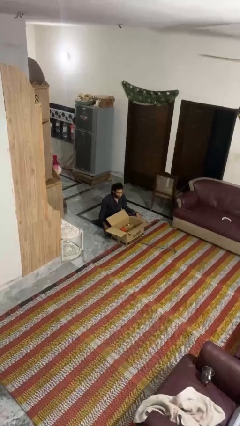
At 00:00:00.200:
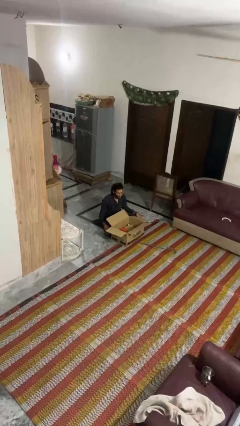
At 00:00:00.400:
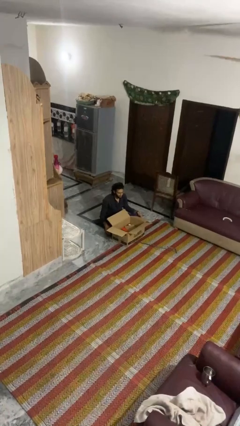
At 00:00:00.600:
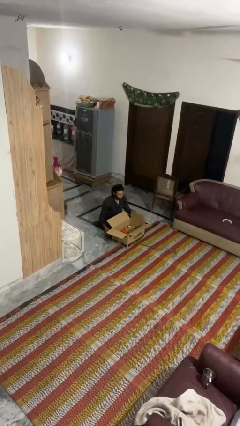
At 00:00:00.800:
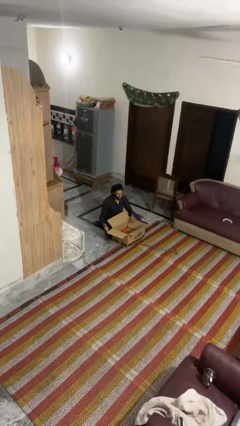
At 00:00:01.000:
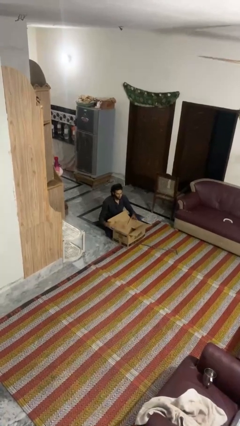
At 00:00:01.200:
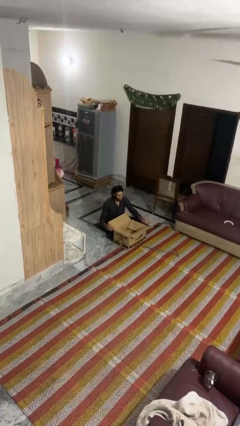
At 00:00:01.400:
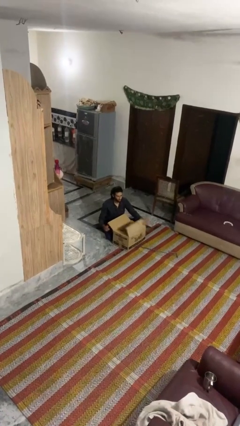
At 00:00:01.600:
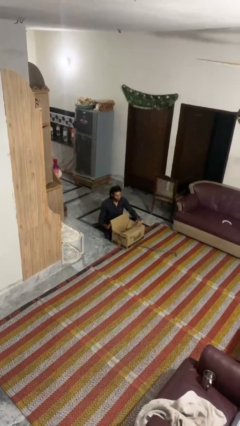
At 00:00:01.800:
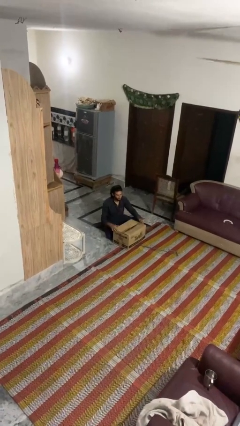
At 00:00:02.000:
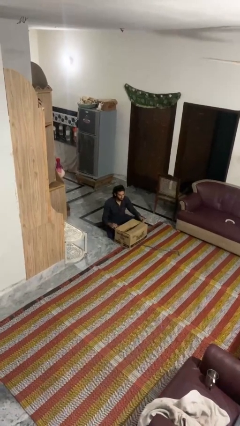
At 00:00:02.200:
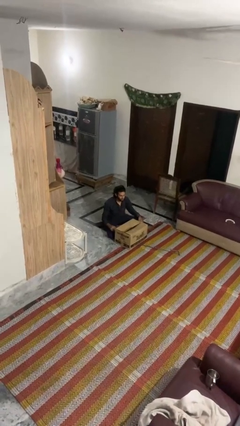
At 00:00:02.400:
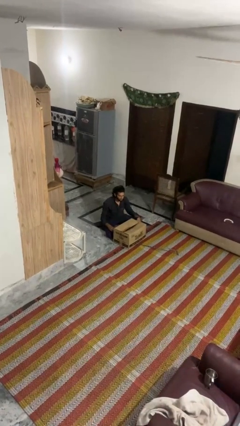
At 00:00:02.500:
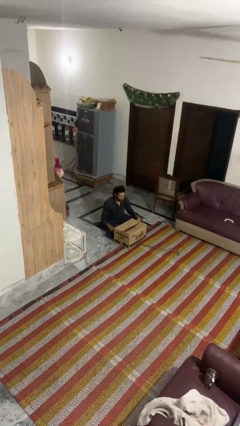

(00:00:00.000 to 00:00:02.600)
person closes box

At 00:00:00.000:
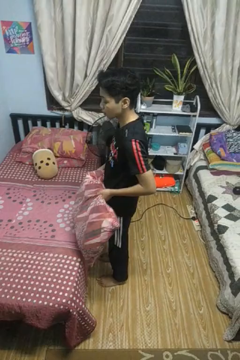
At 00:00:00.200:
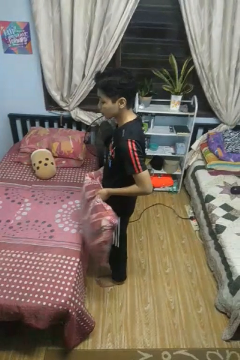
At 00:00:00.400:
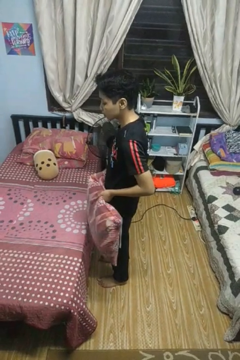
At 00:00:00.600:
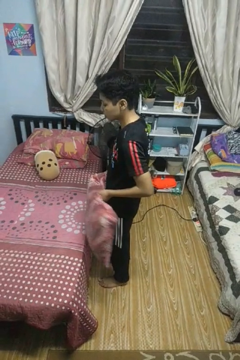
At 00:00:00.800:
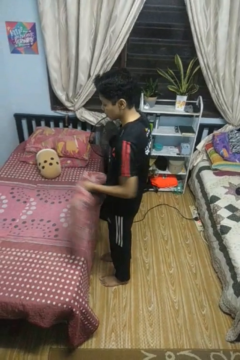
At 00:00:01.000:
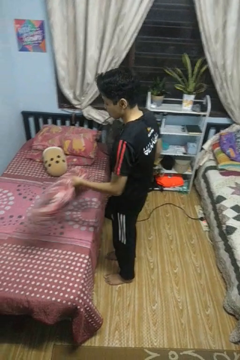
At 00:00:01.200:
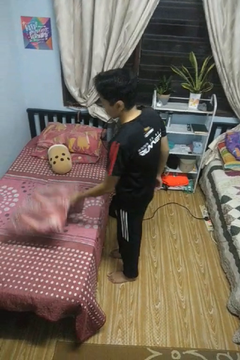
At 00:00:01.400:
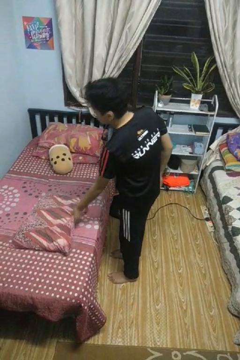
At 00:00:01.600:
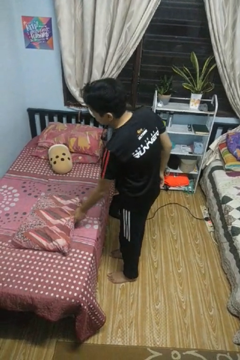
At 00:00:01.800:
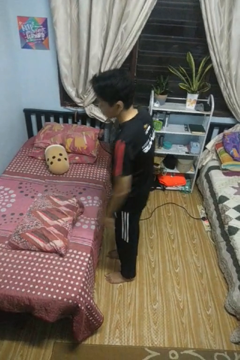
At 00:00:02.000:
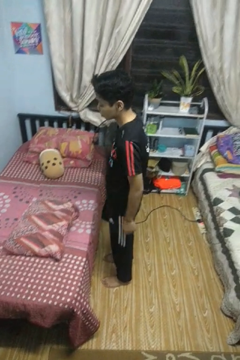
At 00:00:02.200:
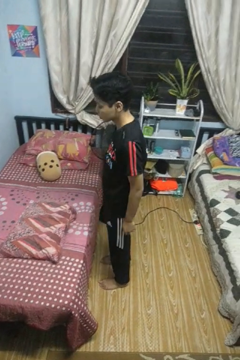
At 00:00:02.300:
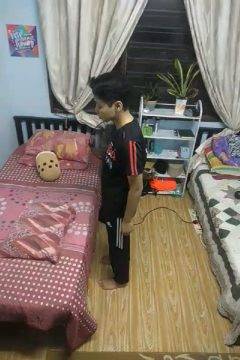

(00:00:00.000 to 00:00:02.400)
person puts down object on bed

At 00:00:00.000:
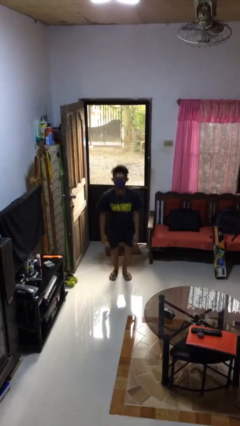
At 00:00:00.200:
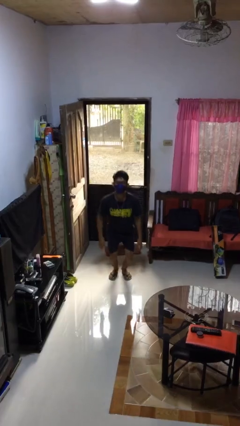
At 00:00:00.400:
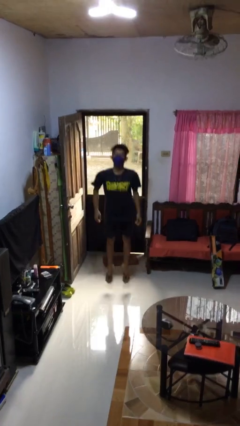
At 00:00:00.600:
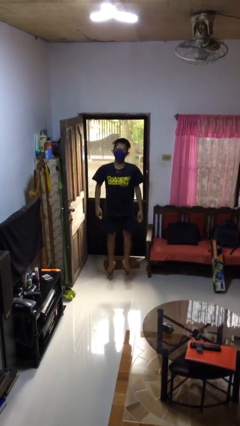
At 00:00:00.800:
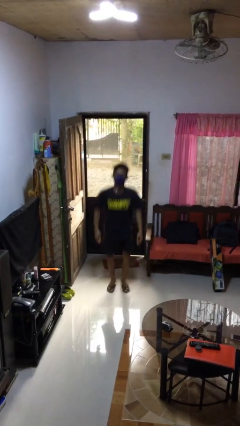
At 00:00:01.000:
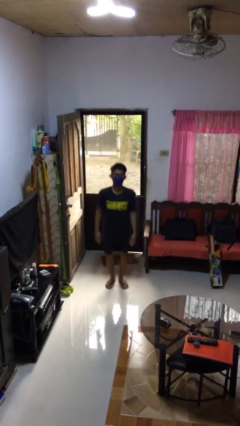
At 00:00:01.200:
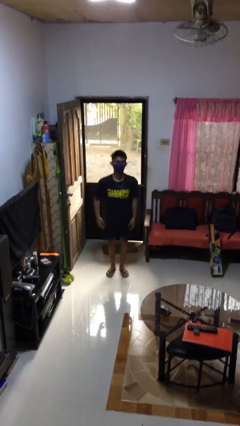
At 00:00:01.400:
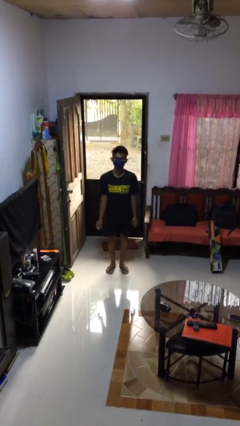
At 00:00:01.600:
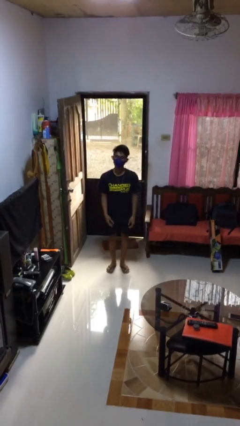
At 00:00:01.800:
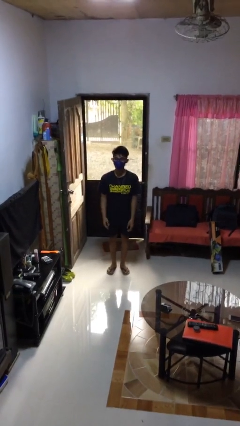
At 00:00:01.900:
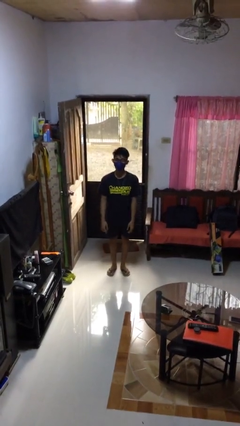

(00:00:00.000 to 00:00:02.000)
person jumps

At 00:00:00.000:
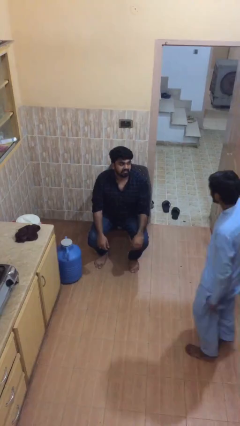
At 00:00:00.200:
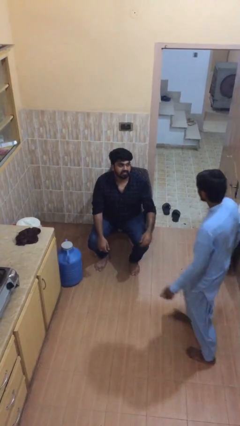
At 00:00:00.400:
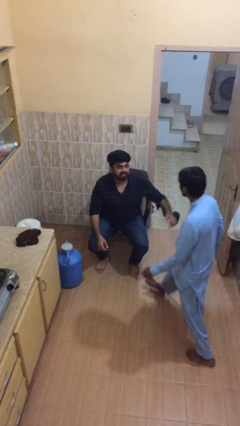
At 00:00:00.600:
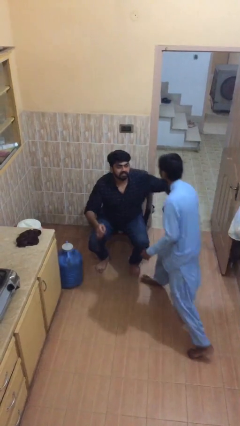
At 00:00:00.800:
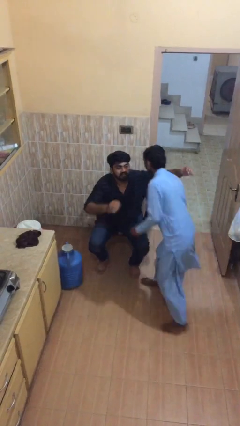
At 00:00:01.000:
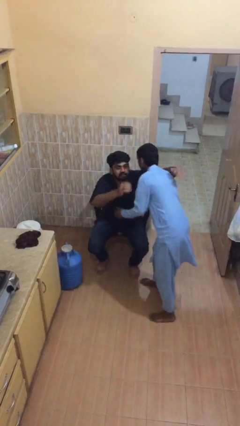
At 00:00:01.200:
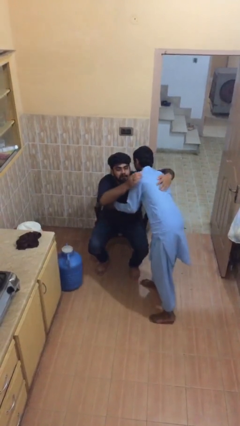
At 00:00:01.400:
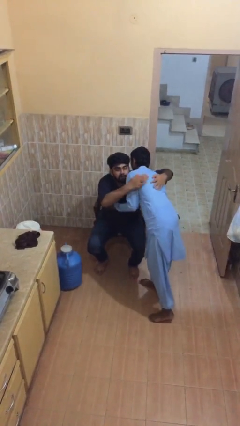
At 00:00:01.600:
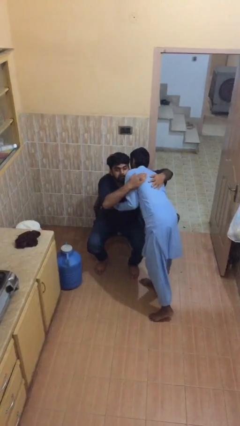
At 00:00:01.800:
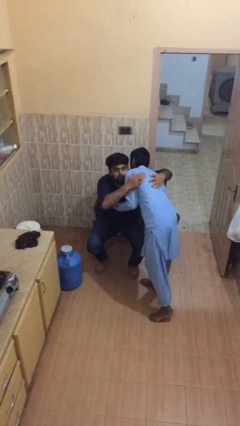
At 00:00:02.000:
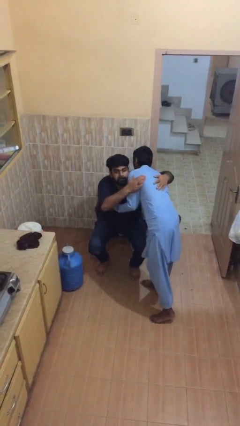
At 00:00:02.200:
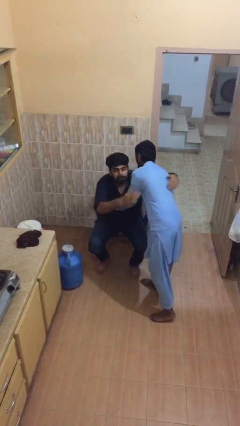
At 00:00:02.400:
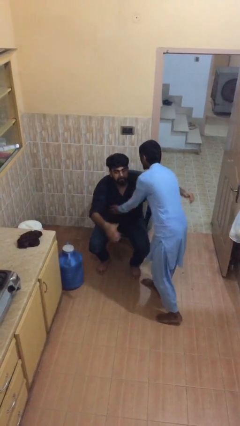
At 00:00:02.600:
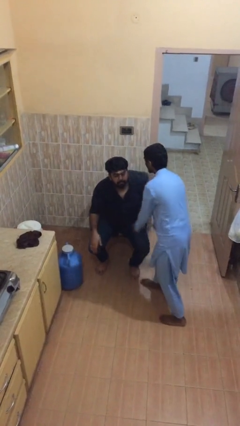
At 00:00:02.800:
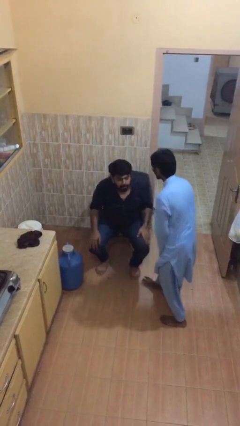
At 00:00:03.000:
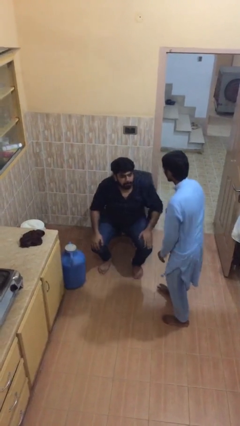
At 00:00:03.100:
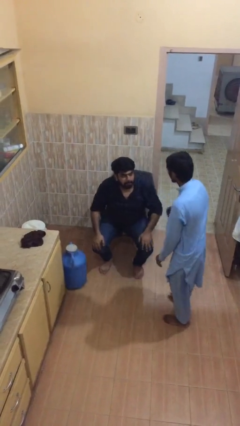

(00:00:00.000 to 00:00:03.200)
person embraces person

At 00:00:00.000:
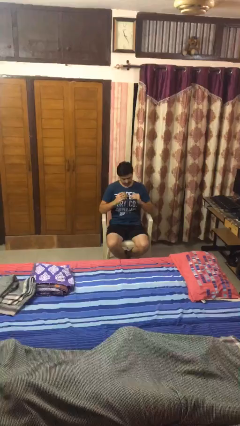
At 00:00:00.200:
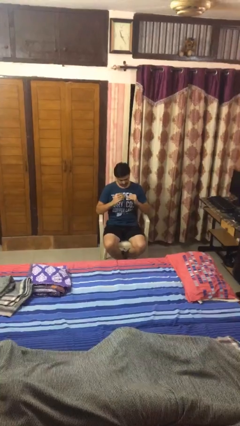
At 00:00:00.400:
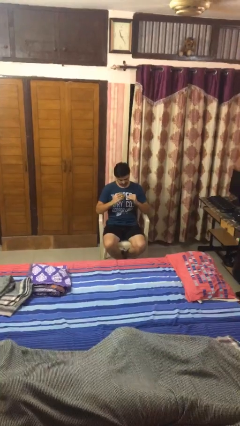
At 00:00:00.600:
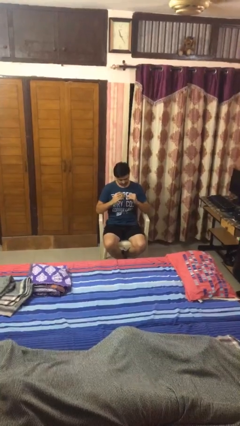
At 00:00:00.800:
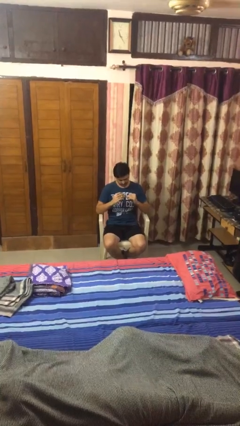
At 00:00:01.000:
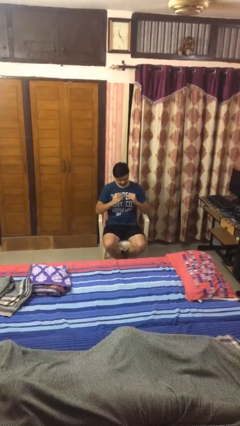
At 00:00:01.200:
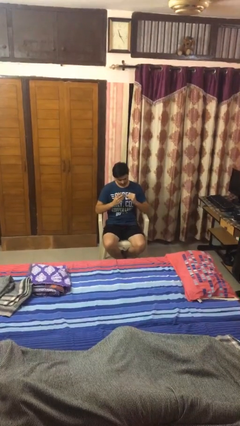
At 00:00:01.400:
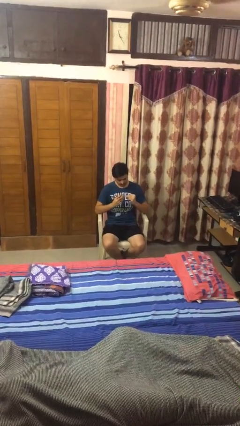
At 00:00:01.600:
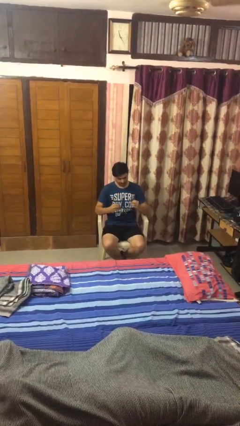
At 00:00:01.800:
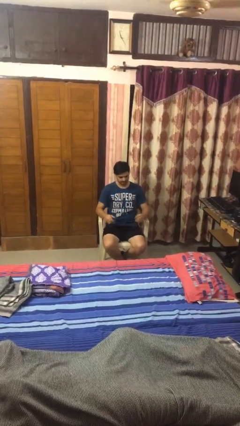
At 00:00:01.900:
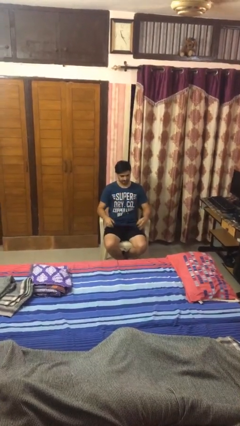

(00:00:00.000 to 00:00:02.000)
person clips fingernails

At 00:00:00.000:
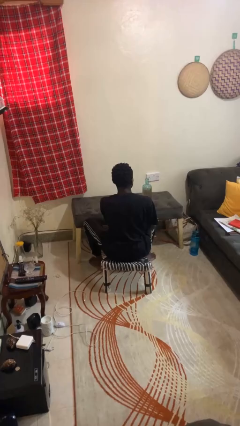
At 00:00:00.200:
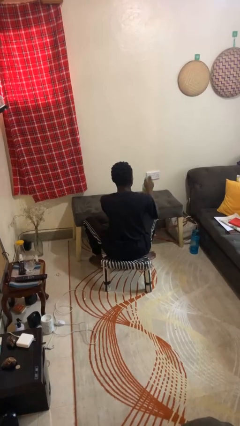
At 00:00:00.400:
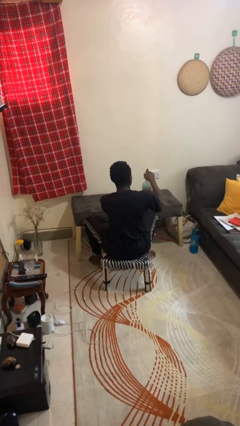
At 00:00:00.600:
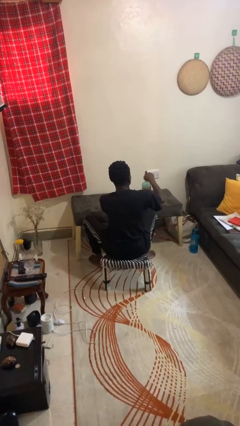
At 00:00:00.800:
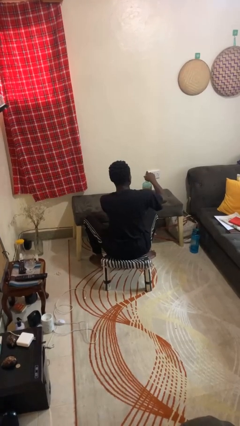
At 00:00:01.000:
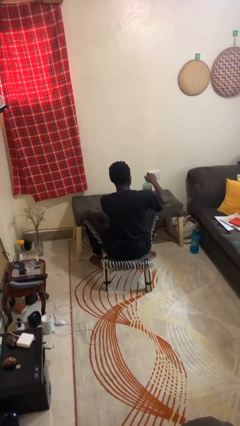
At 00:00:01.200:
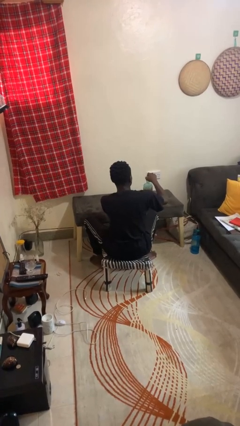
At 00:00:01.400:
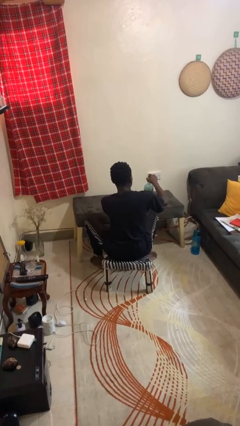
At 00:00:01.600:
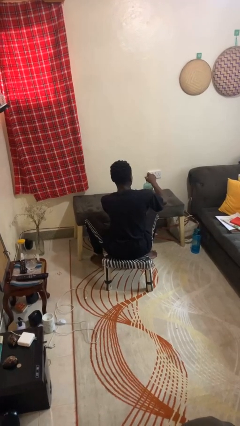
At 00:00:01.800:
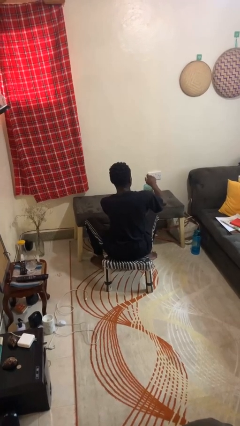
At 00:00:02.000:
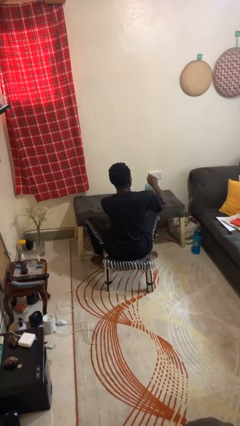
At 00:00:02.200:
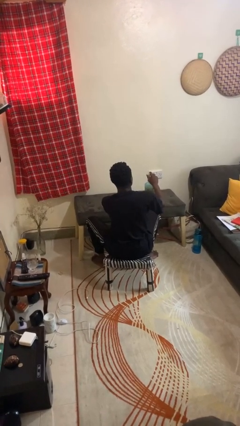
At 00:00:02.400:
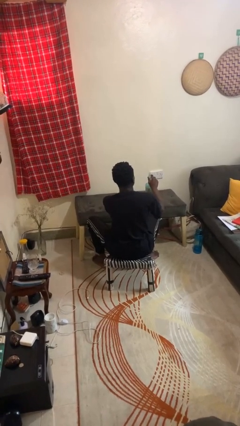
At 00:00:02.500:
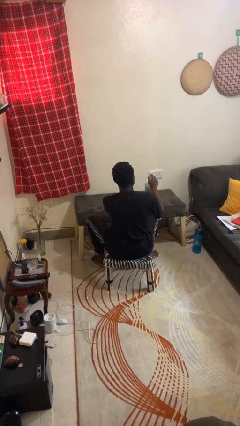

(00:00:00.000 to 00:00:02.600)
person closes jar

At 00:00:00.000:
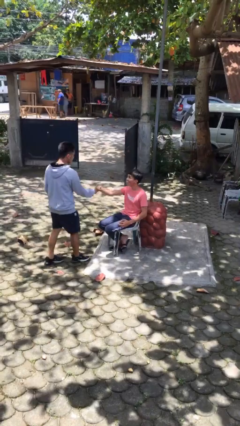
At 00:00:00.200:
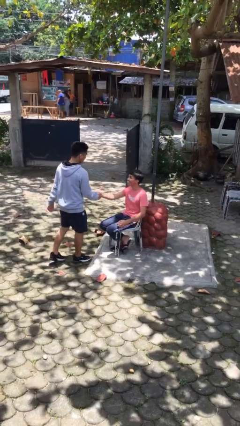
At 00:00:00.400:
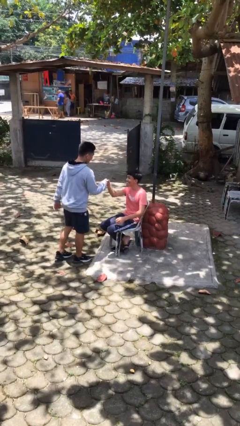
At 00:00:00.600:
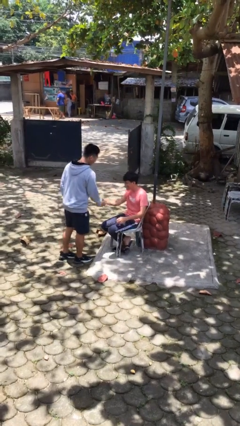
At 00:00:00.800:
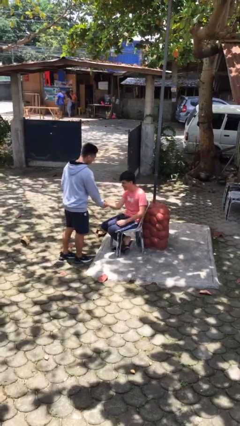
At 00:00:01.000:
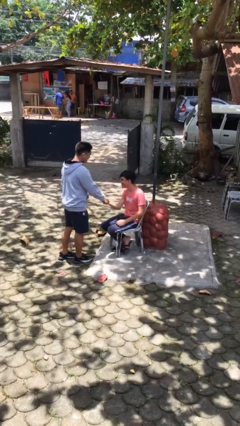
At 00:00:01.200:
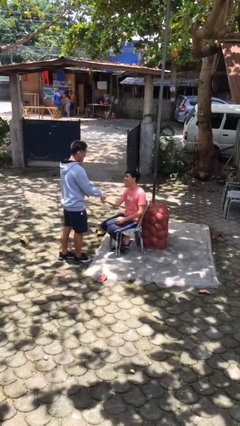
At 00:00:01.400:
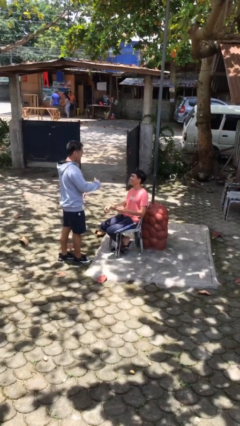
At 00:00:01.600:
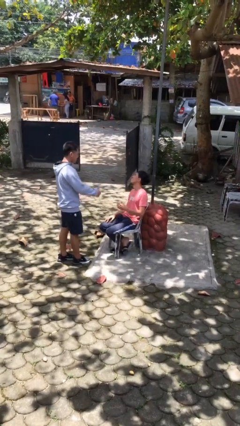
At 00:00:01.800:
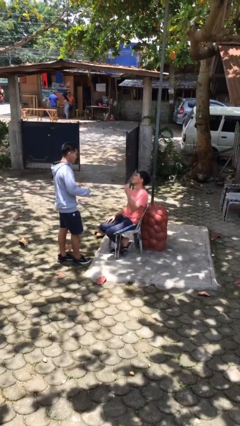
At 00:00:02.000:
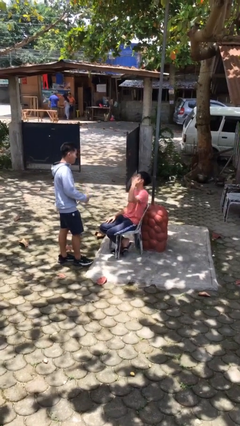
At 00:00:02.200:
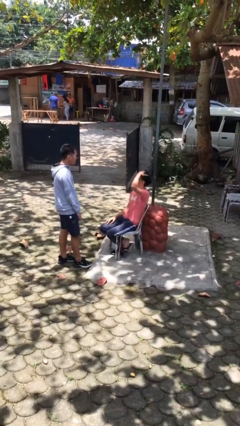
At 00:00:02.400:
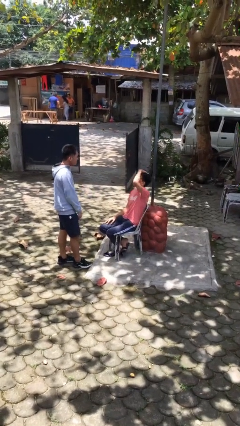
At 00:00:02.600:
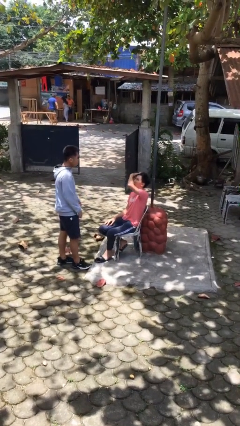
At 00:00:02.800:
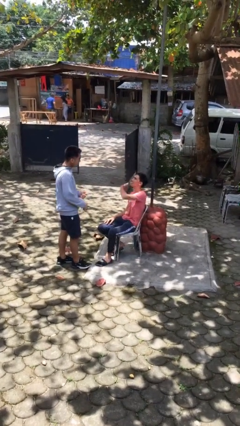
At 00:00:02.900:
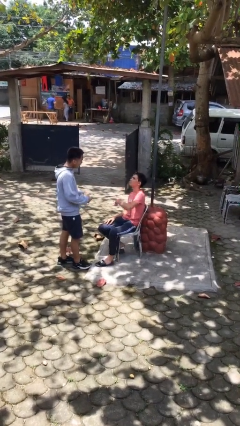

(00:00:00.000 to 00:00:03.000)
person shakes hand
